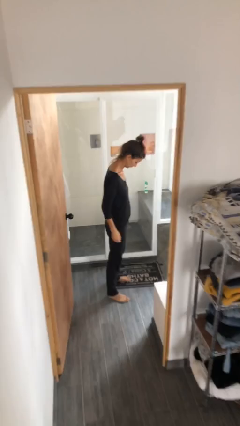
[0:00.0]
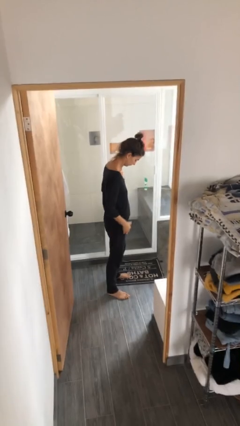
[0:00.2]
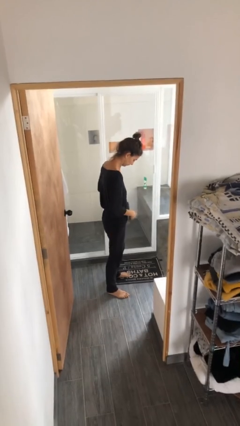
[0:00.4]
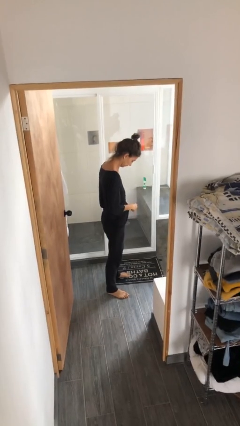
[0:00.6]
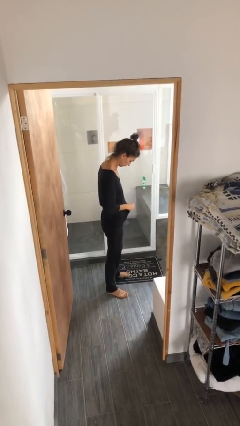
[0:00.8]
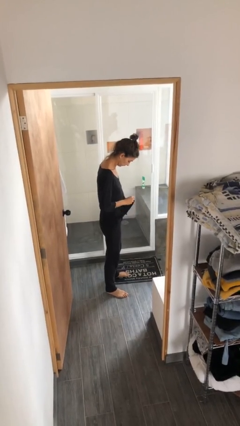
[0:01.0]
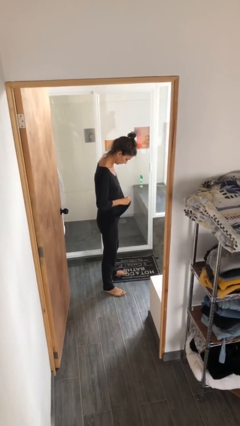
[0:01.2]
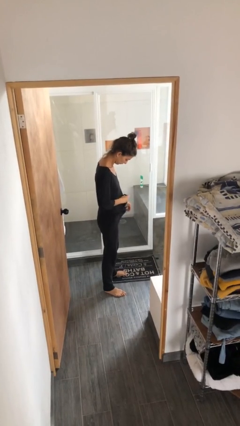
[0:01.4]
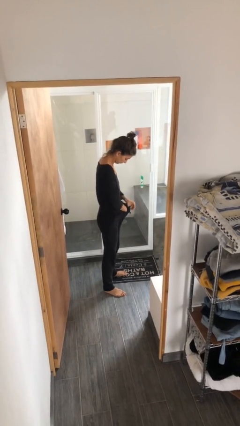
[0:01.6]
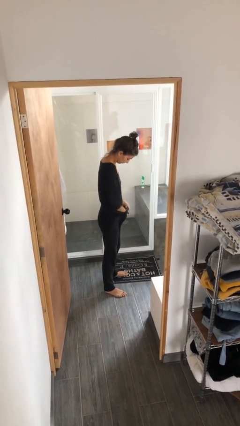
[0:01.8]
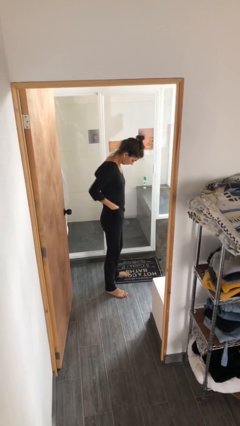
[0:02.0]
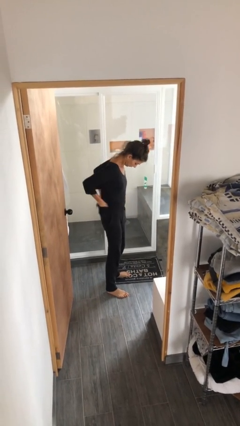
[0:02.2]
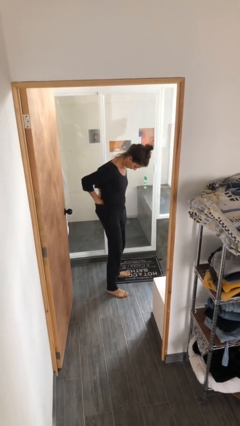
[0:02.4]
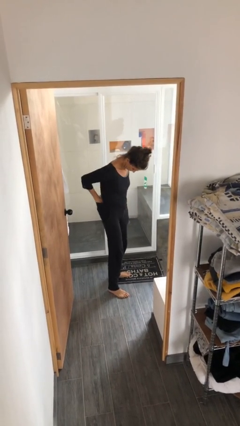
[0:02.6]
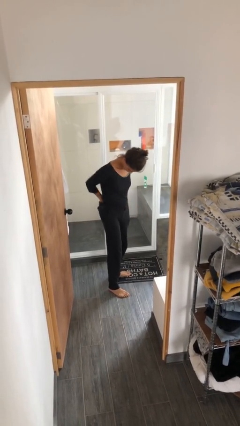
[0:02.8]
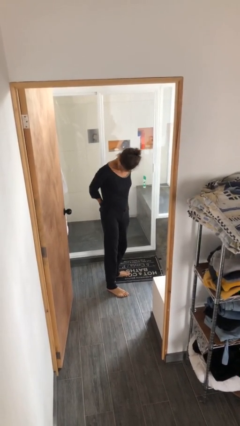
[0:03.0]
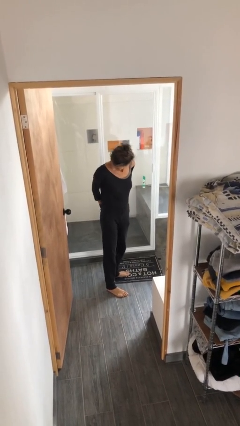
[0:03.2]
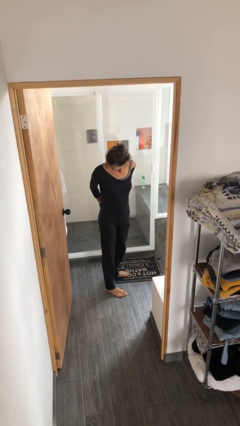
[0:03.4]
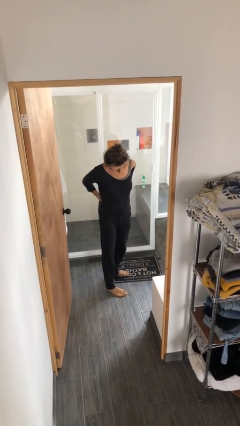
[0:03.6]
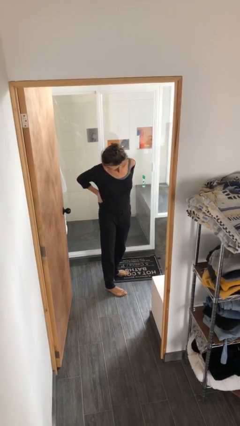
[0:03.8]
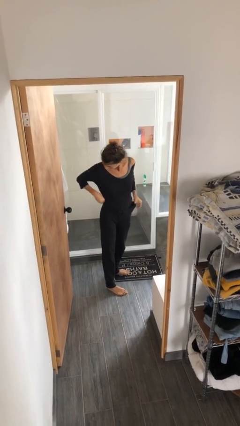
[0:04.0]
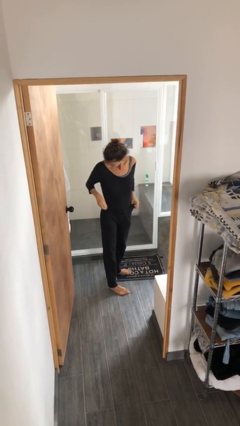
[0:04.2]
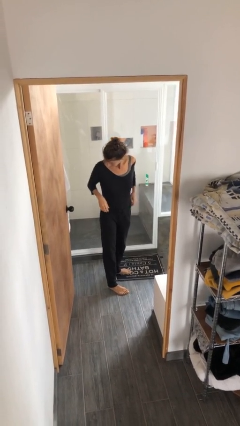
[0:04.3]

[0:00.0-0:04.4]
person tucks in shirt

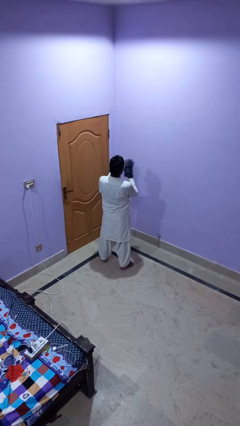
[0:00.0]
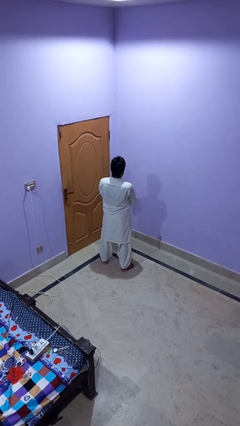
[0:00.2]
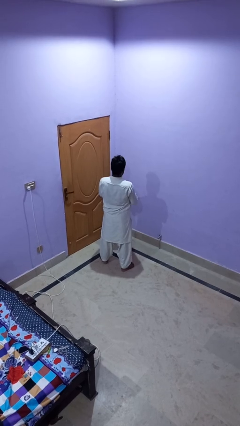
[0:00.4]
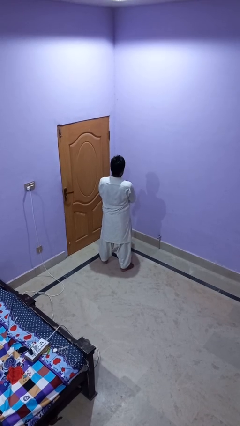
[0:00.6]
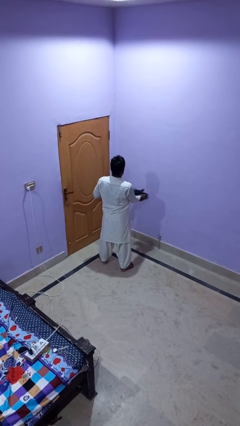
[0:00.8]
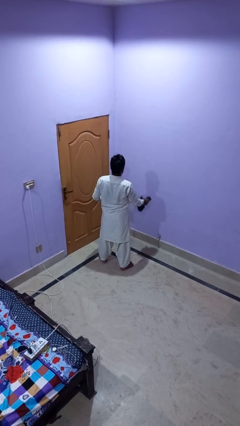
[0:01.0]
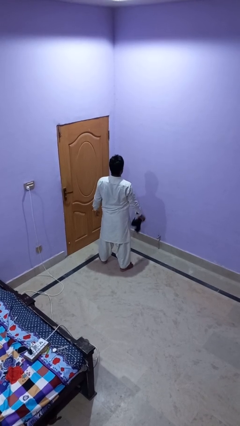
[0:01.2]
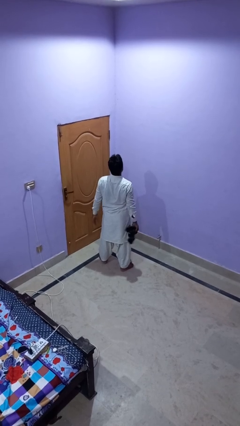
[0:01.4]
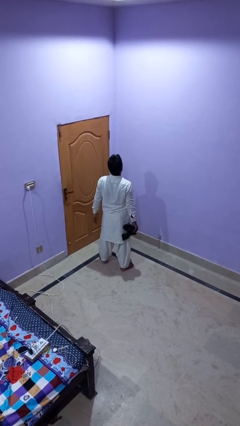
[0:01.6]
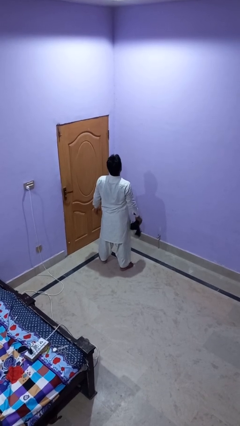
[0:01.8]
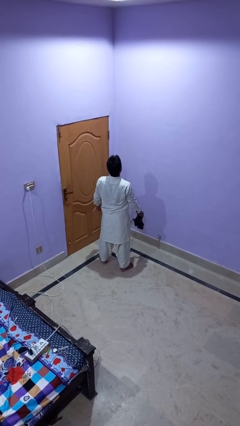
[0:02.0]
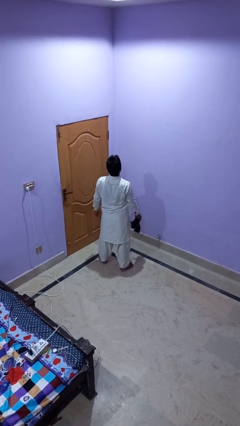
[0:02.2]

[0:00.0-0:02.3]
person takes off gloves

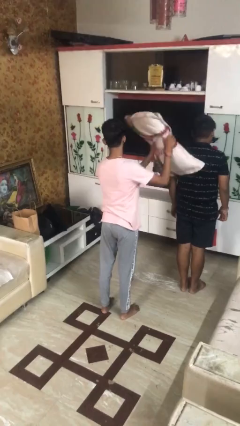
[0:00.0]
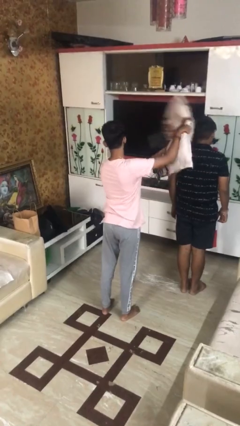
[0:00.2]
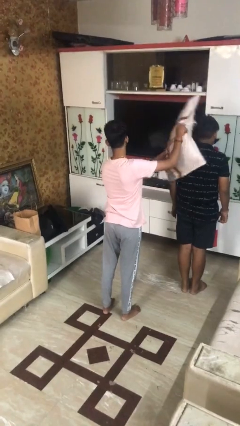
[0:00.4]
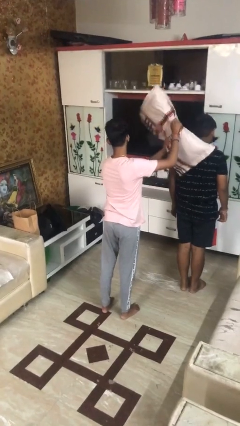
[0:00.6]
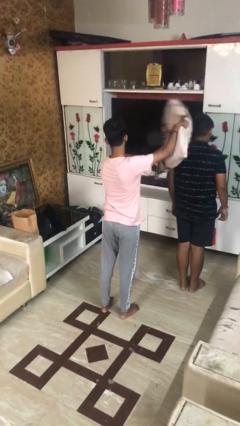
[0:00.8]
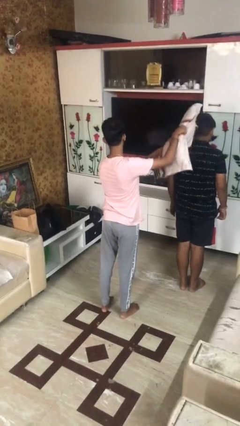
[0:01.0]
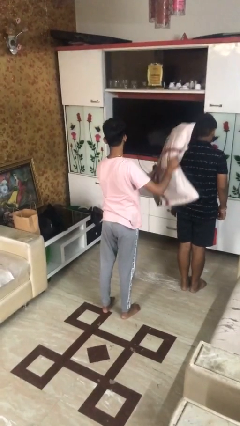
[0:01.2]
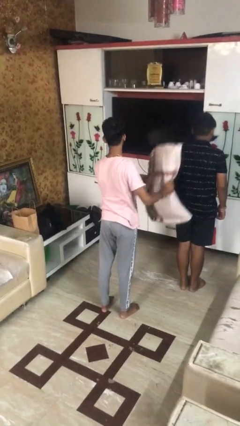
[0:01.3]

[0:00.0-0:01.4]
person hits person with pillow

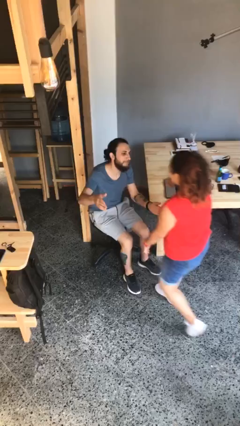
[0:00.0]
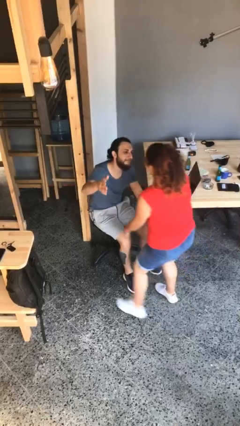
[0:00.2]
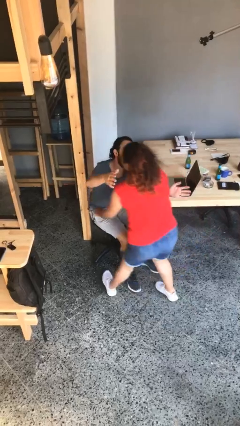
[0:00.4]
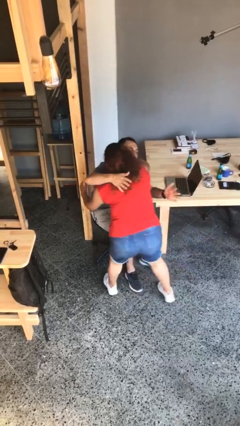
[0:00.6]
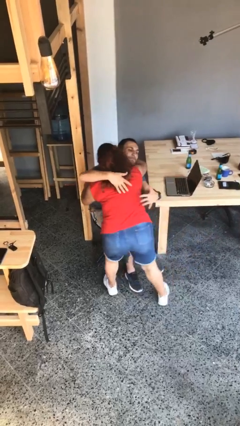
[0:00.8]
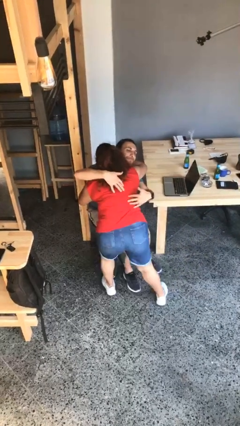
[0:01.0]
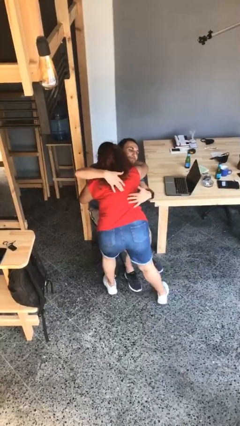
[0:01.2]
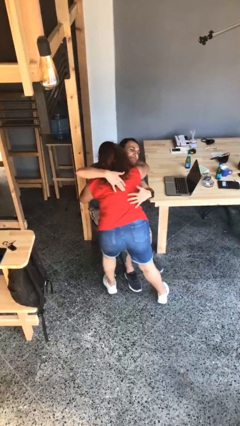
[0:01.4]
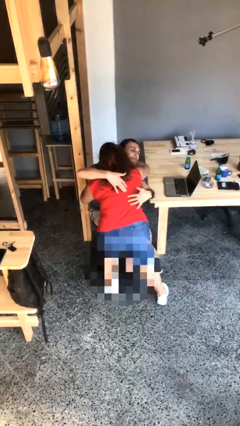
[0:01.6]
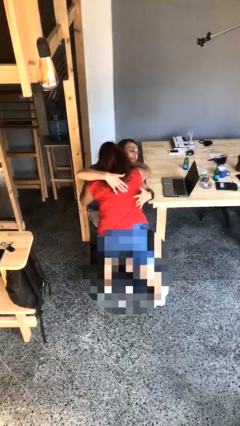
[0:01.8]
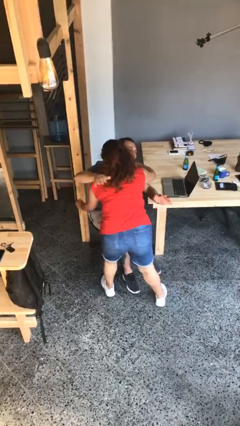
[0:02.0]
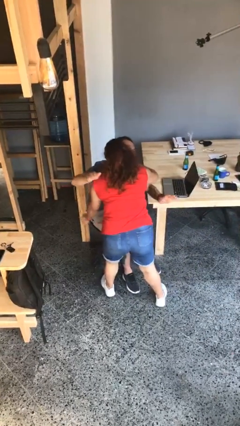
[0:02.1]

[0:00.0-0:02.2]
person embraces person

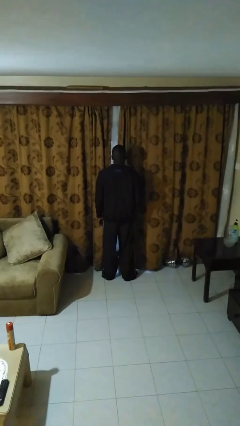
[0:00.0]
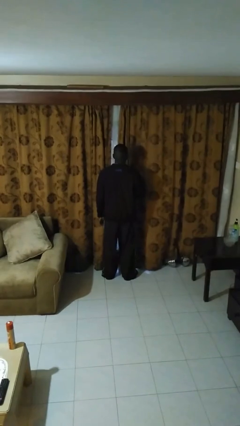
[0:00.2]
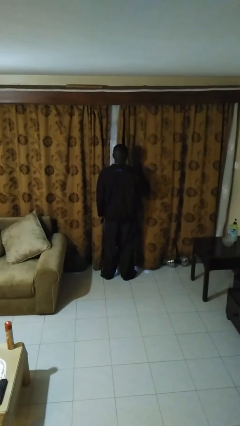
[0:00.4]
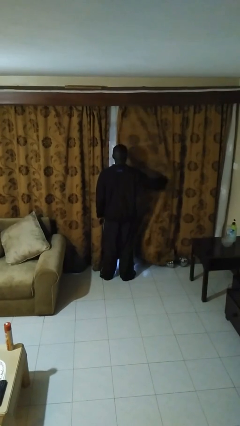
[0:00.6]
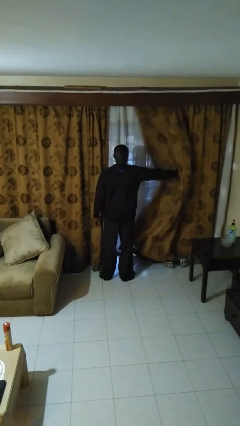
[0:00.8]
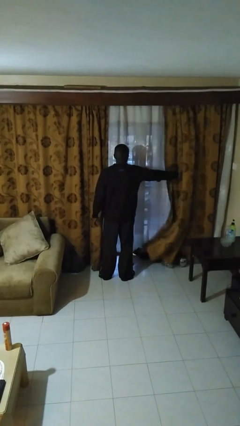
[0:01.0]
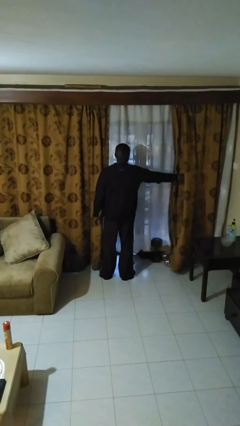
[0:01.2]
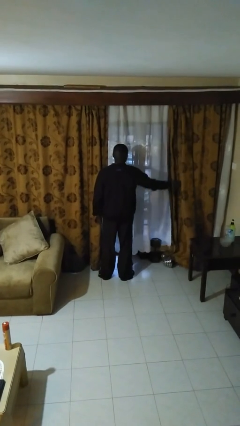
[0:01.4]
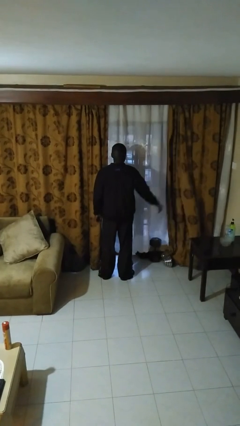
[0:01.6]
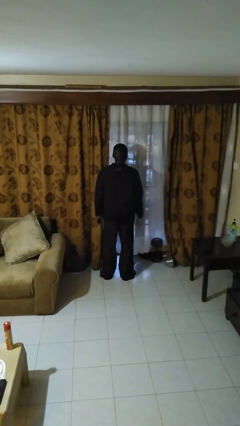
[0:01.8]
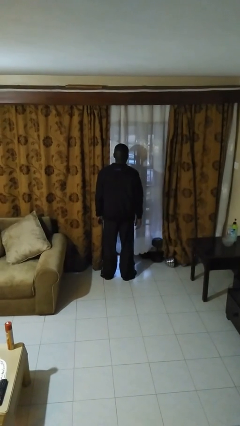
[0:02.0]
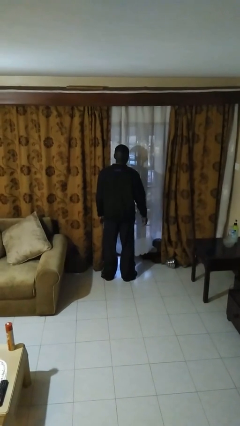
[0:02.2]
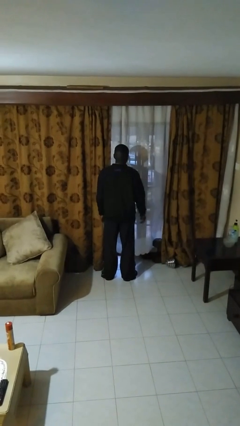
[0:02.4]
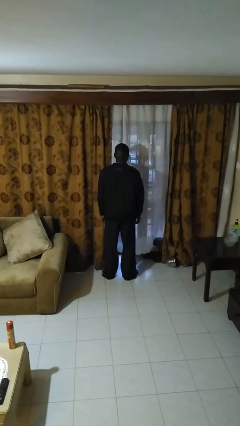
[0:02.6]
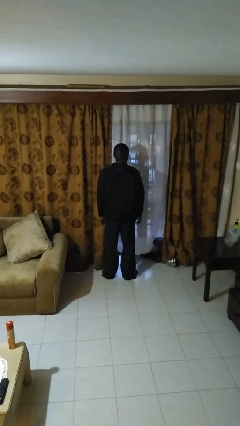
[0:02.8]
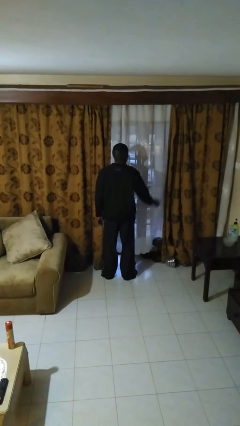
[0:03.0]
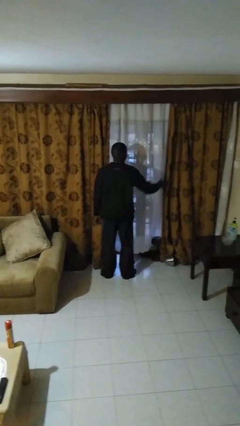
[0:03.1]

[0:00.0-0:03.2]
person opens curtains

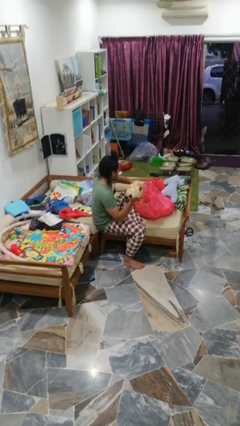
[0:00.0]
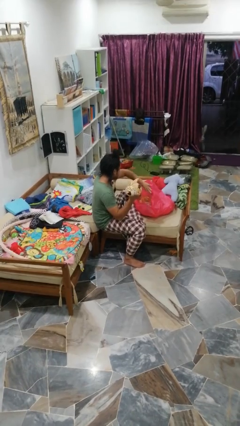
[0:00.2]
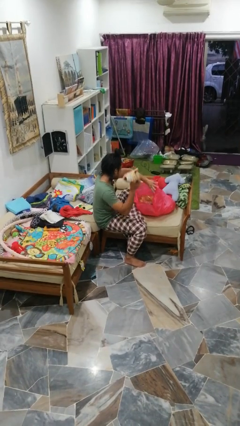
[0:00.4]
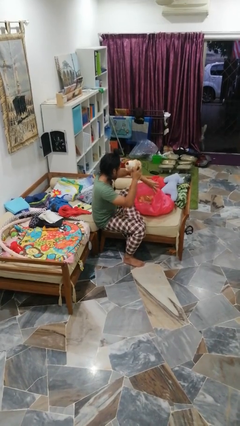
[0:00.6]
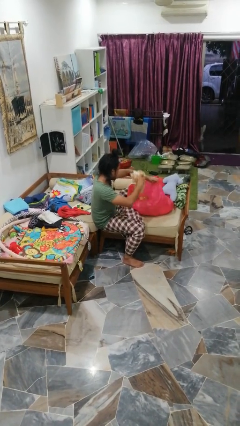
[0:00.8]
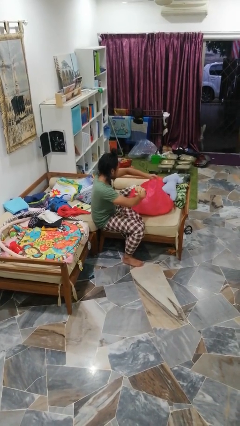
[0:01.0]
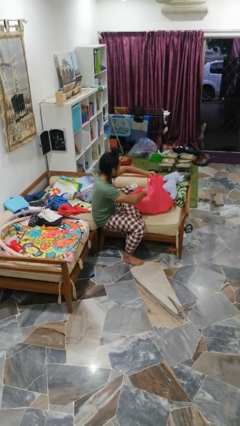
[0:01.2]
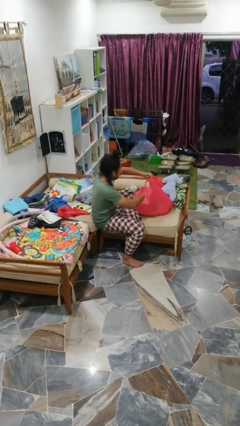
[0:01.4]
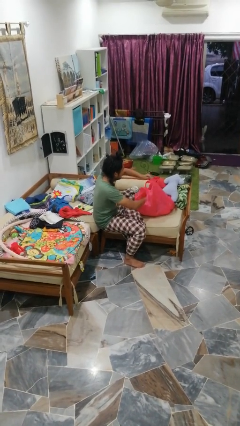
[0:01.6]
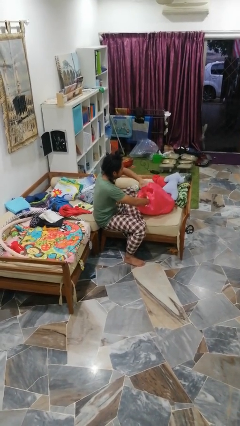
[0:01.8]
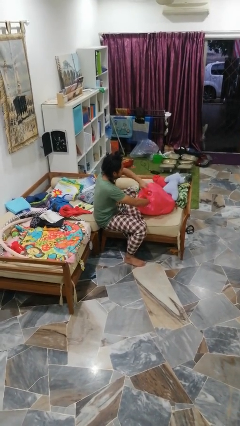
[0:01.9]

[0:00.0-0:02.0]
person puts object into bag

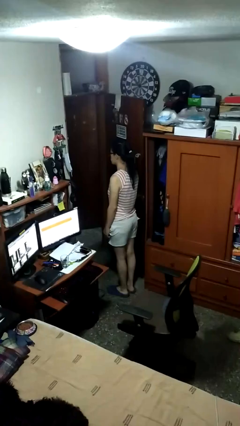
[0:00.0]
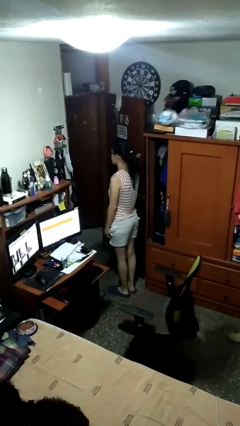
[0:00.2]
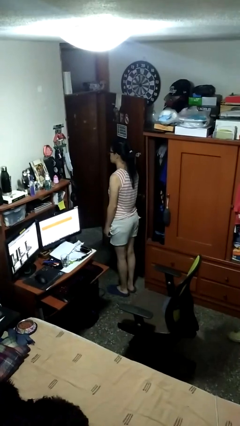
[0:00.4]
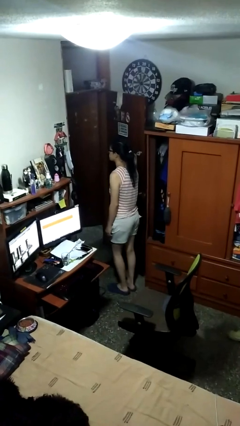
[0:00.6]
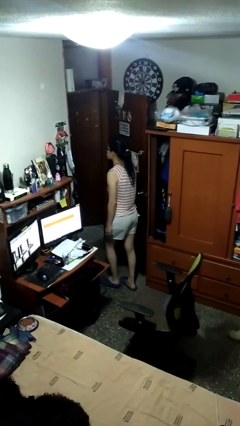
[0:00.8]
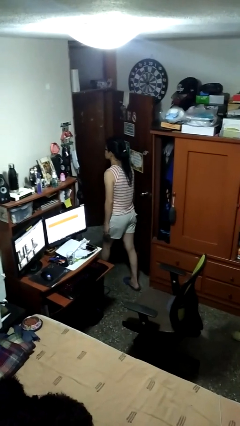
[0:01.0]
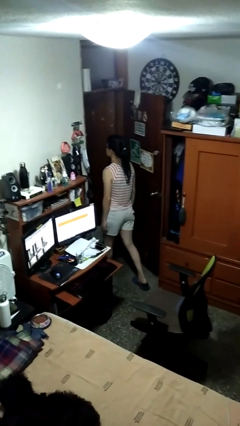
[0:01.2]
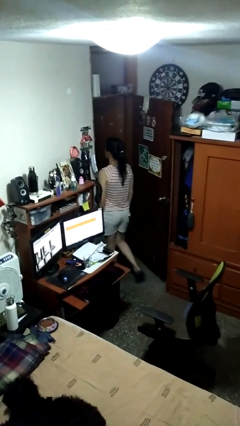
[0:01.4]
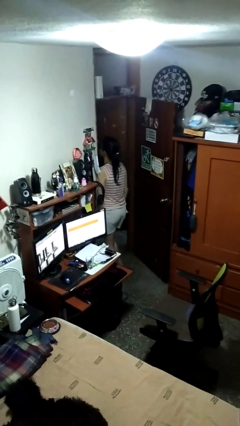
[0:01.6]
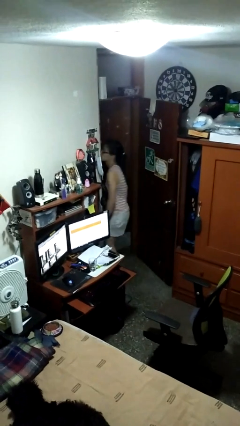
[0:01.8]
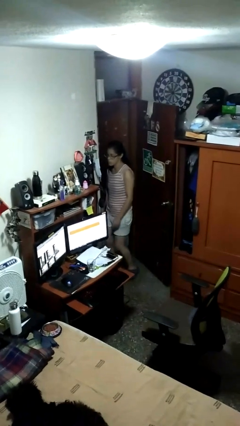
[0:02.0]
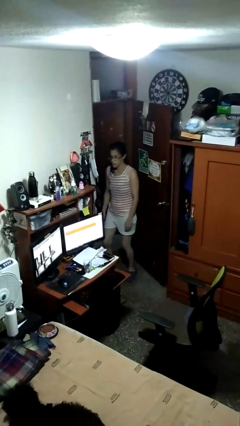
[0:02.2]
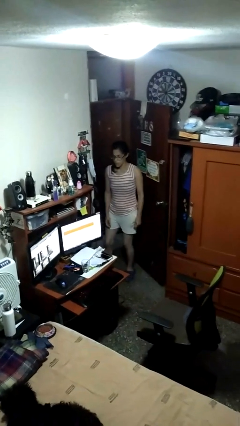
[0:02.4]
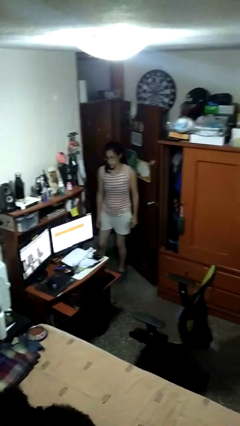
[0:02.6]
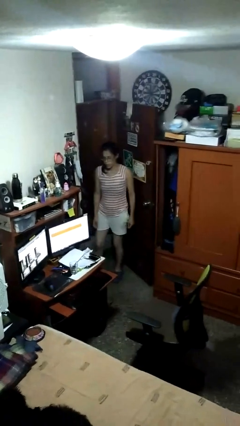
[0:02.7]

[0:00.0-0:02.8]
person bumps into wall
